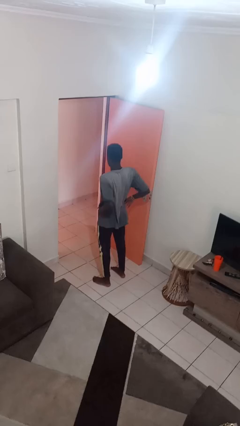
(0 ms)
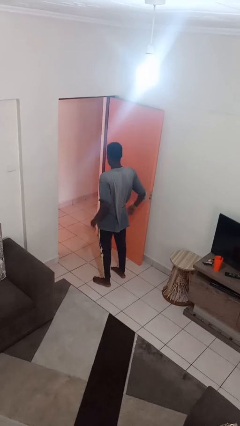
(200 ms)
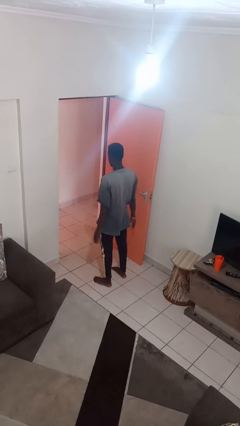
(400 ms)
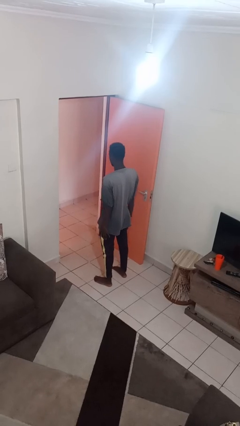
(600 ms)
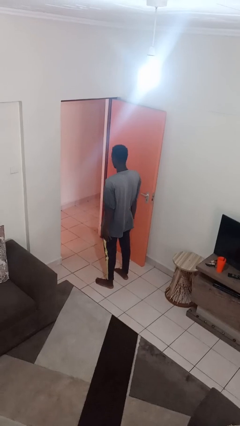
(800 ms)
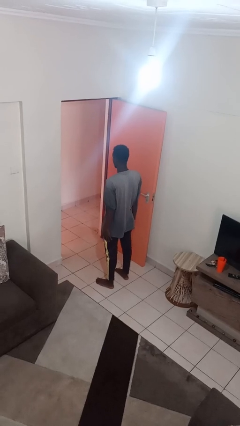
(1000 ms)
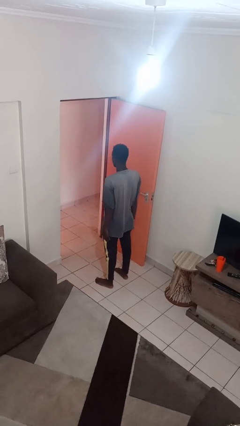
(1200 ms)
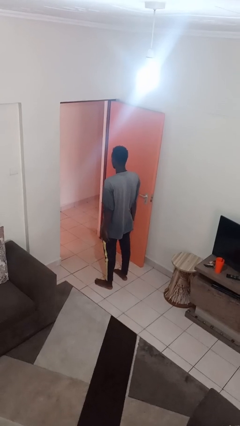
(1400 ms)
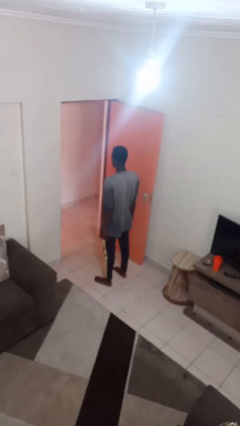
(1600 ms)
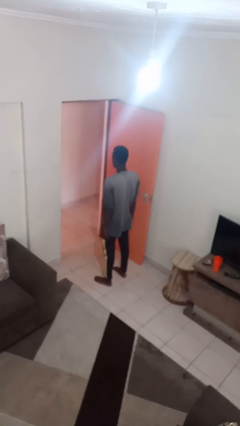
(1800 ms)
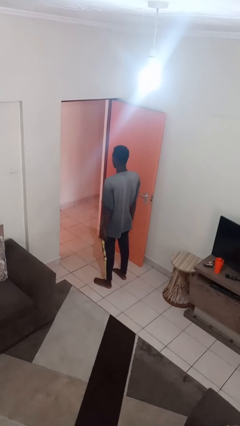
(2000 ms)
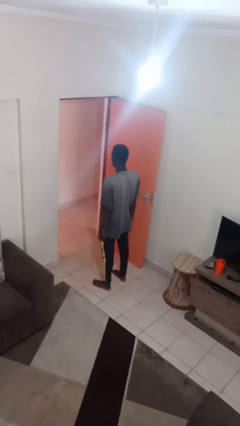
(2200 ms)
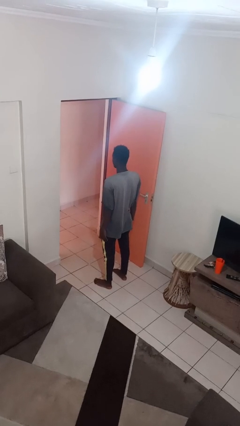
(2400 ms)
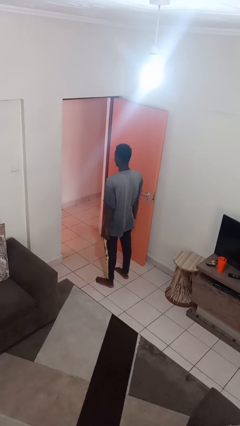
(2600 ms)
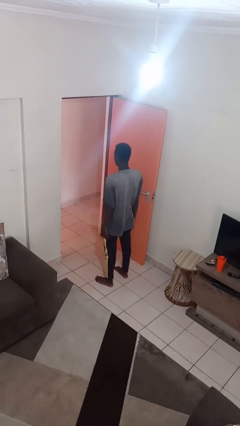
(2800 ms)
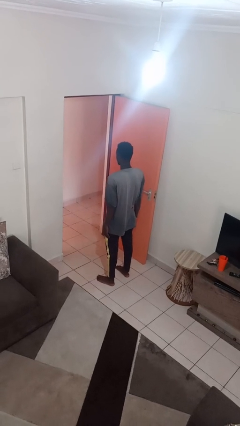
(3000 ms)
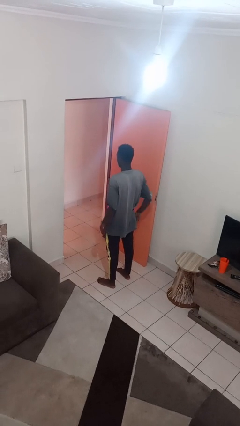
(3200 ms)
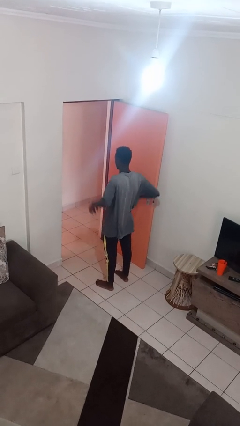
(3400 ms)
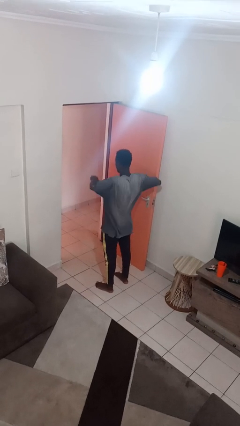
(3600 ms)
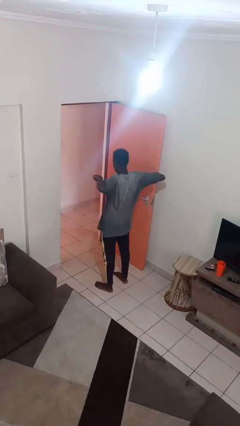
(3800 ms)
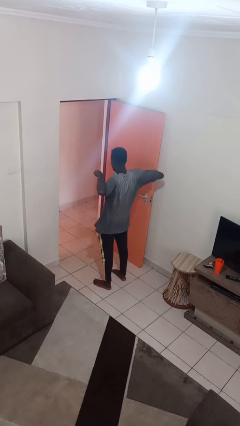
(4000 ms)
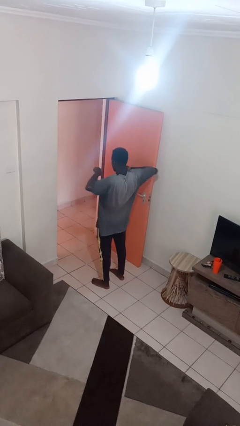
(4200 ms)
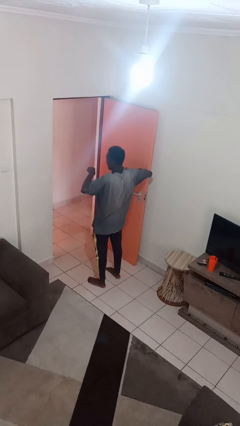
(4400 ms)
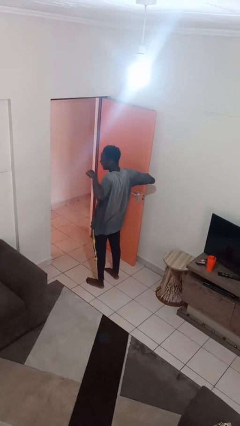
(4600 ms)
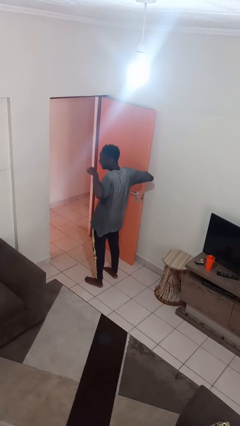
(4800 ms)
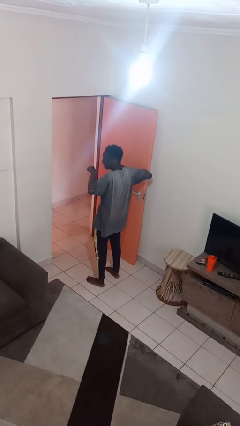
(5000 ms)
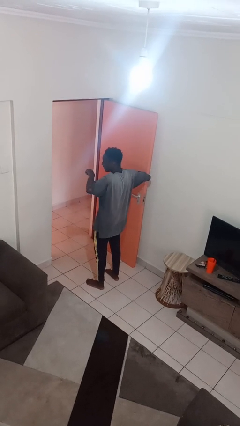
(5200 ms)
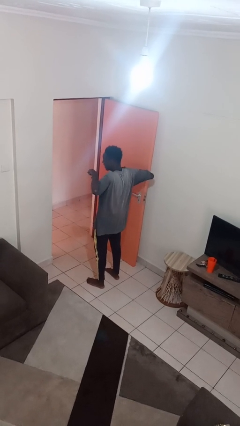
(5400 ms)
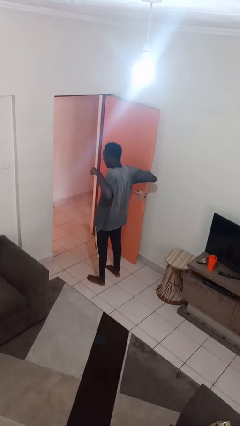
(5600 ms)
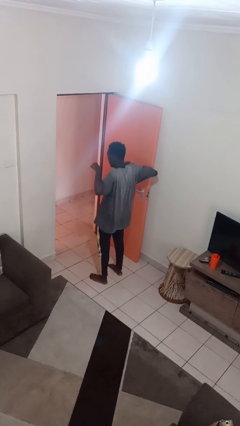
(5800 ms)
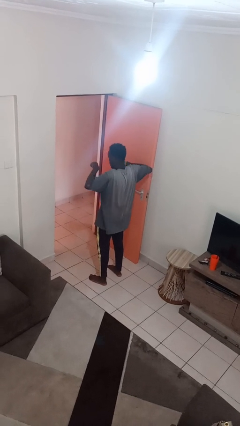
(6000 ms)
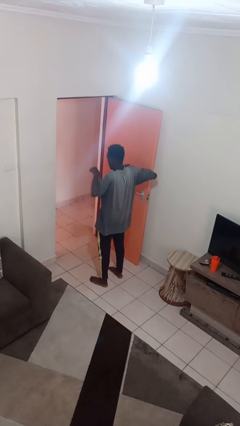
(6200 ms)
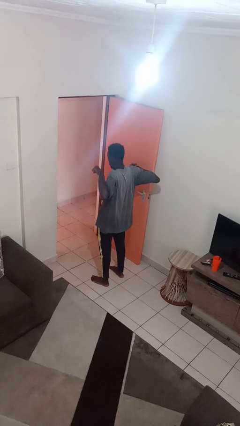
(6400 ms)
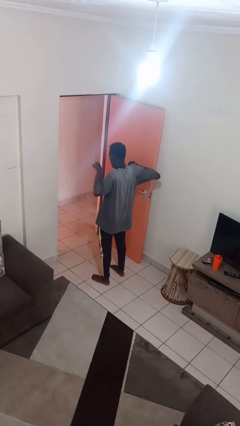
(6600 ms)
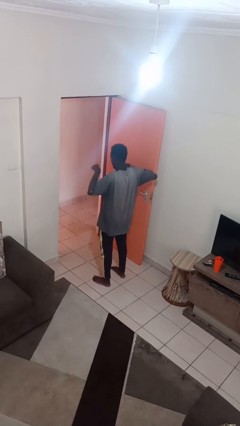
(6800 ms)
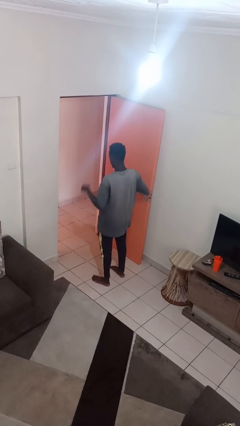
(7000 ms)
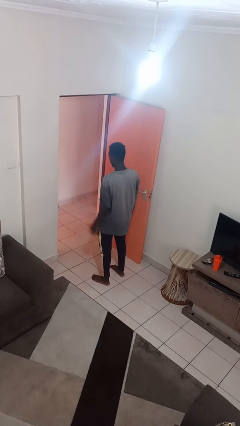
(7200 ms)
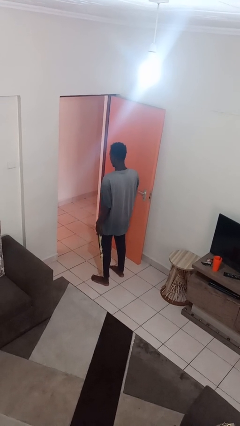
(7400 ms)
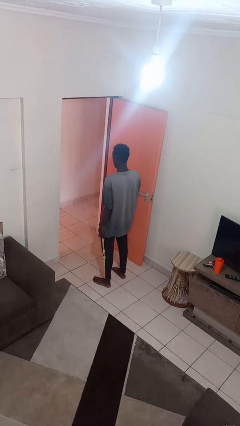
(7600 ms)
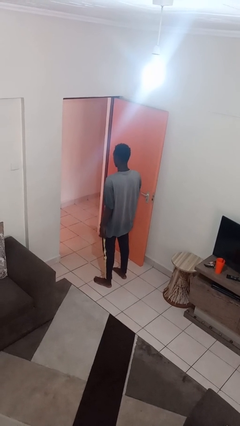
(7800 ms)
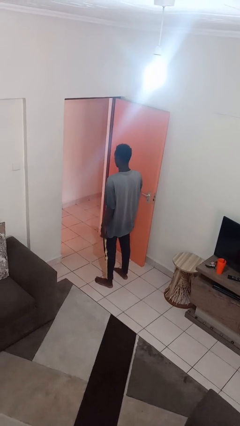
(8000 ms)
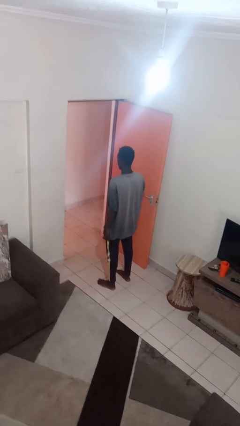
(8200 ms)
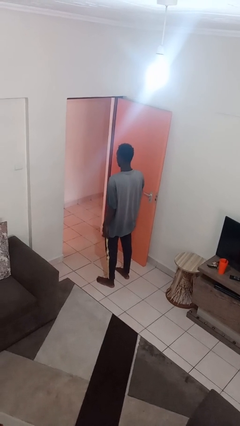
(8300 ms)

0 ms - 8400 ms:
person stretches arms to side

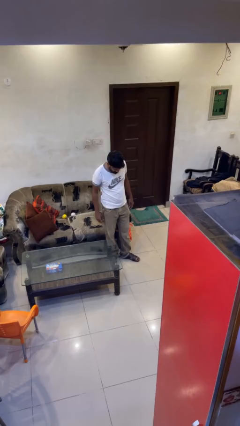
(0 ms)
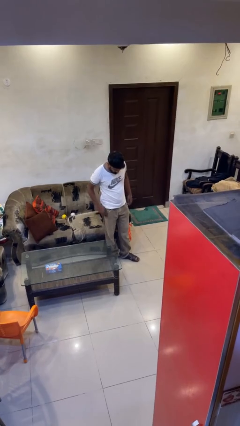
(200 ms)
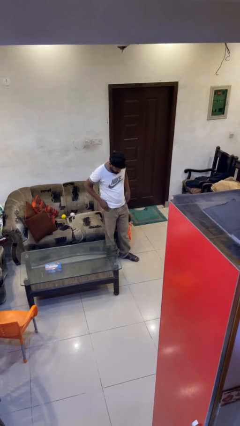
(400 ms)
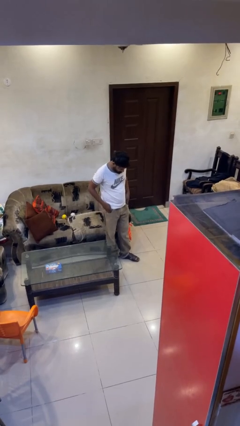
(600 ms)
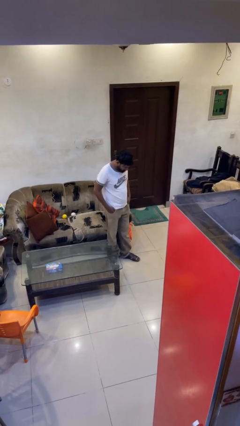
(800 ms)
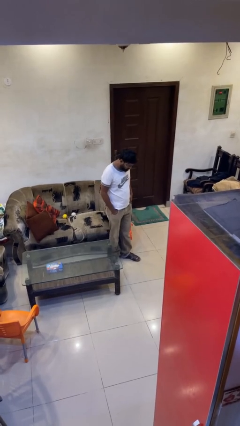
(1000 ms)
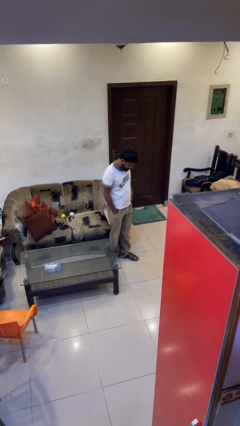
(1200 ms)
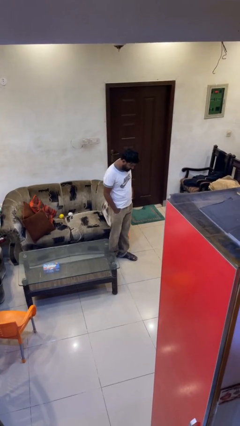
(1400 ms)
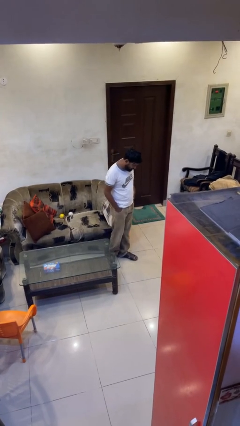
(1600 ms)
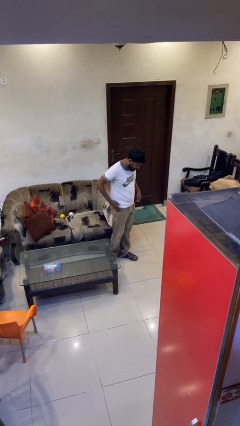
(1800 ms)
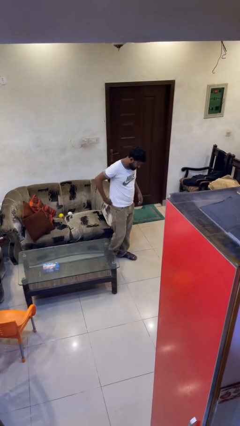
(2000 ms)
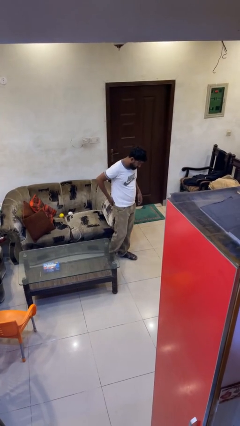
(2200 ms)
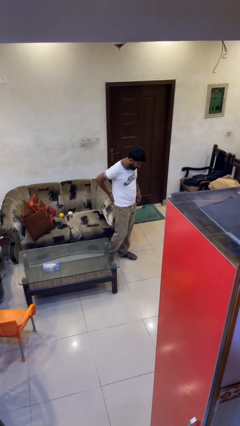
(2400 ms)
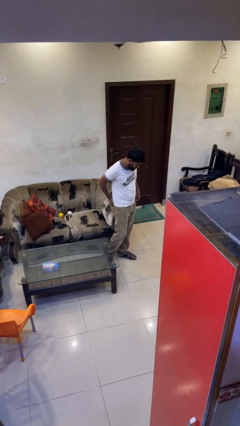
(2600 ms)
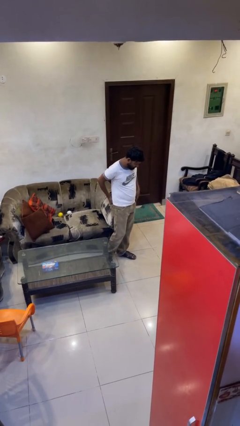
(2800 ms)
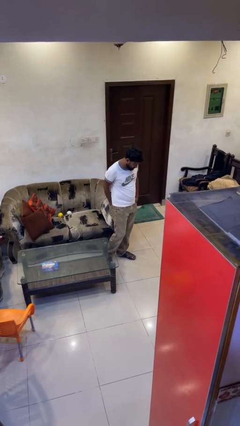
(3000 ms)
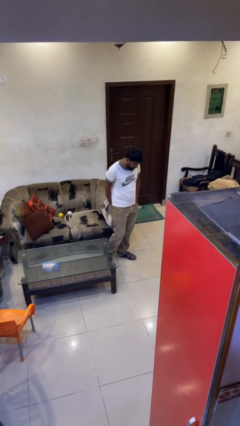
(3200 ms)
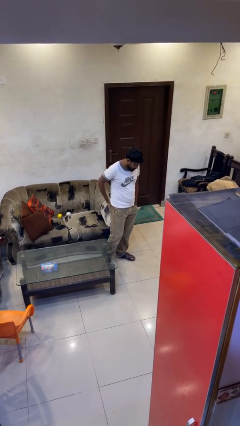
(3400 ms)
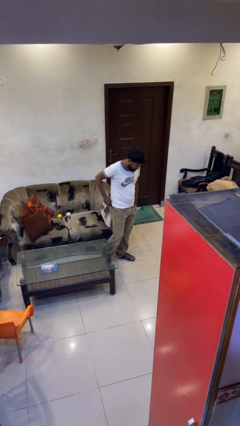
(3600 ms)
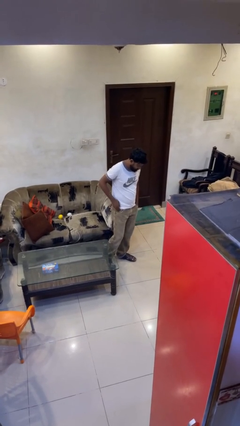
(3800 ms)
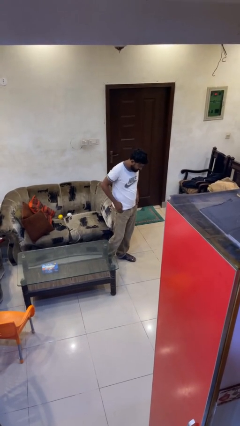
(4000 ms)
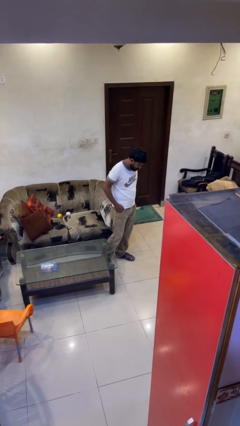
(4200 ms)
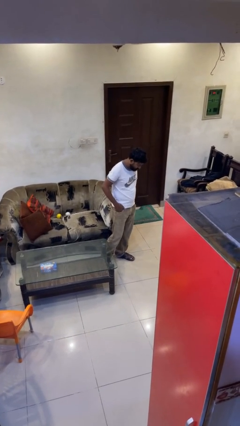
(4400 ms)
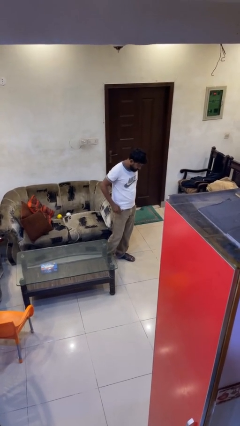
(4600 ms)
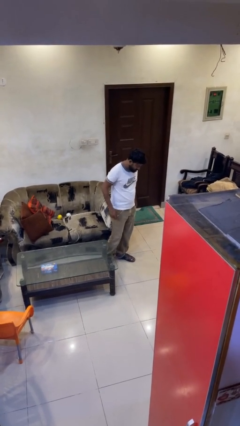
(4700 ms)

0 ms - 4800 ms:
person puts hands in back pockets

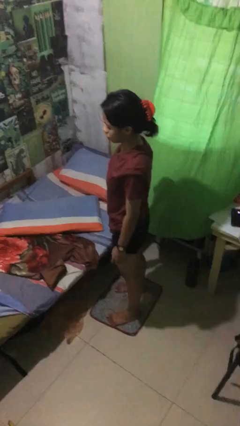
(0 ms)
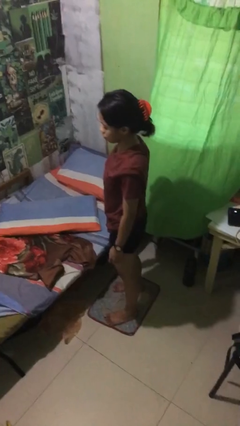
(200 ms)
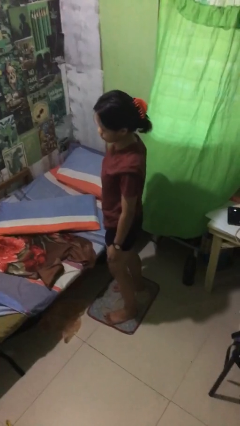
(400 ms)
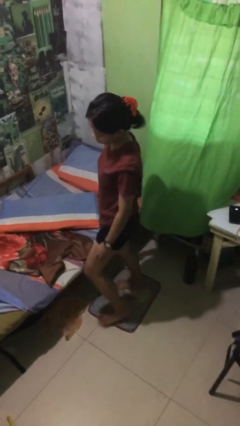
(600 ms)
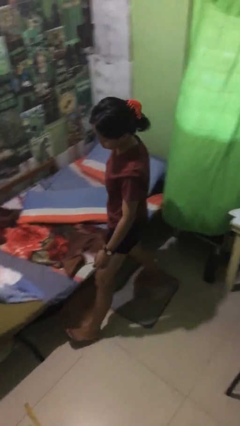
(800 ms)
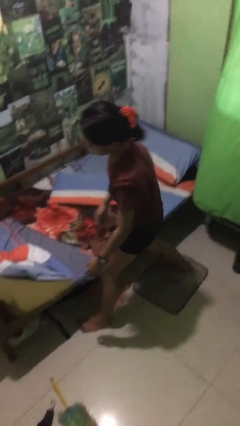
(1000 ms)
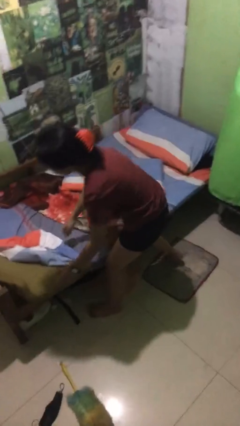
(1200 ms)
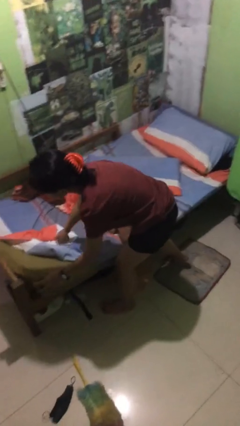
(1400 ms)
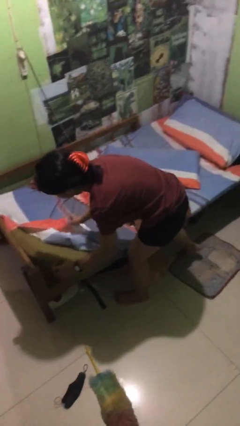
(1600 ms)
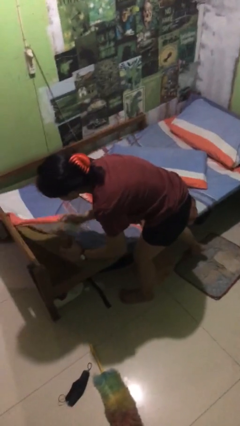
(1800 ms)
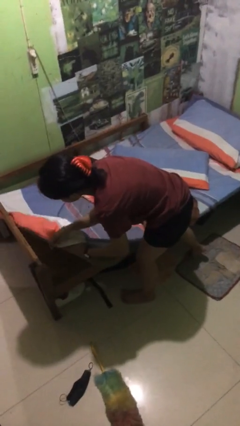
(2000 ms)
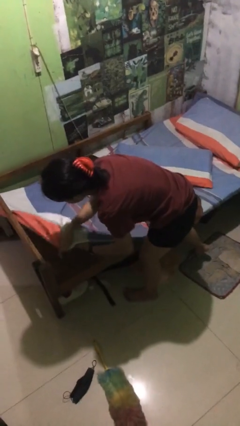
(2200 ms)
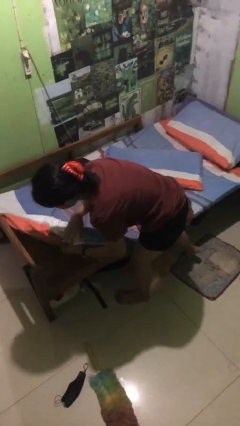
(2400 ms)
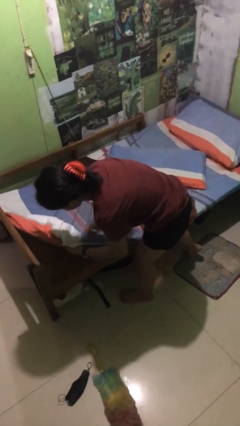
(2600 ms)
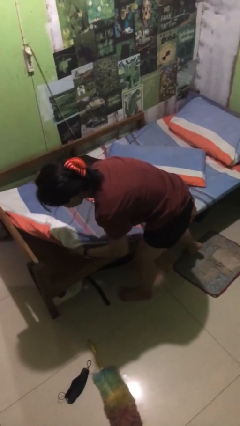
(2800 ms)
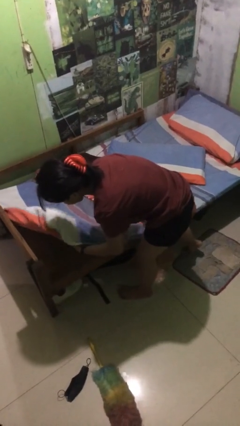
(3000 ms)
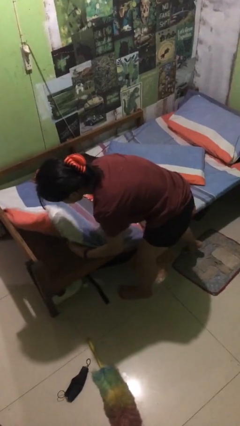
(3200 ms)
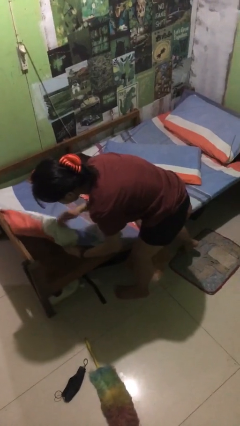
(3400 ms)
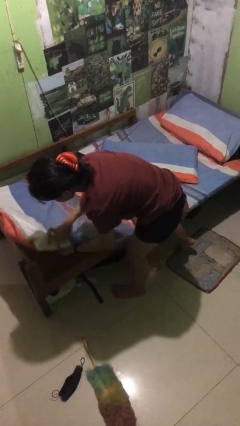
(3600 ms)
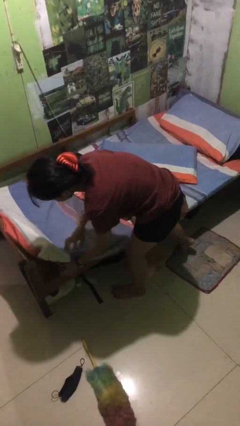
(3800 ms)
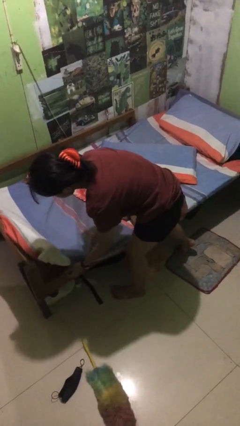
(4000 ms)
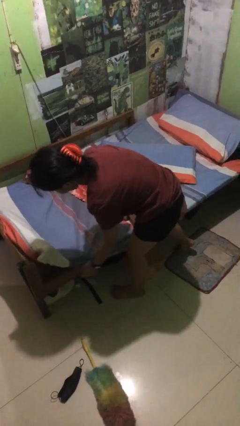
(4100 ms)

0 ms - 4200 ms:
person makes bed

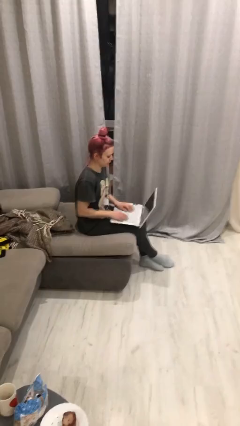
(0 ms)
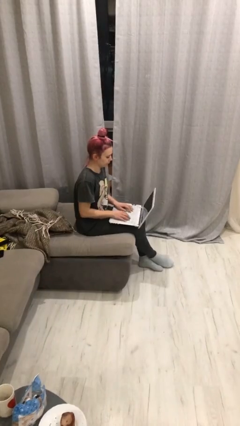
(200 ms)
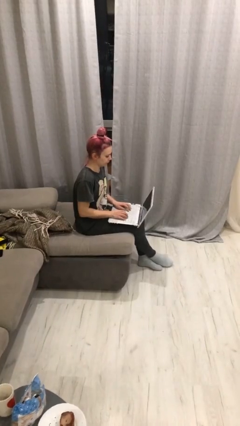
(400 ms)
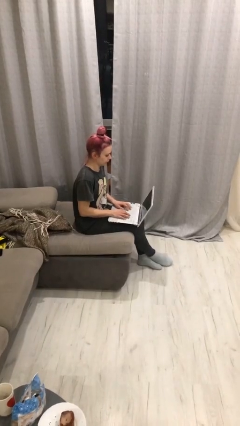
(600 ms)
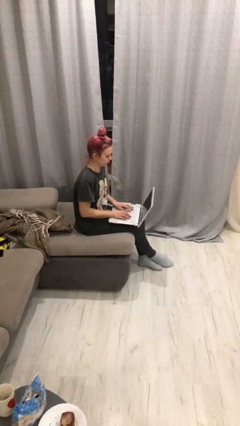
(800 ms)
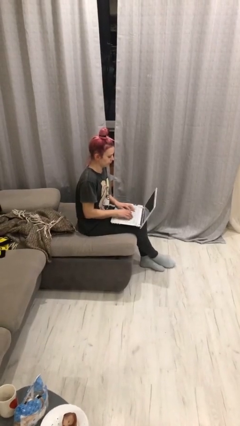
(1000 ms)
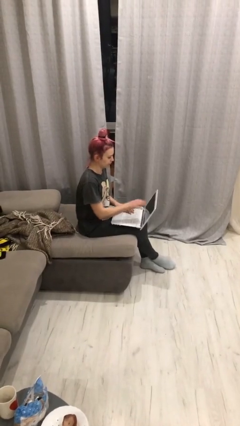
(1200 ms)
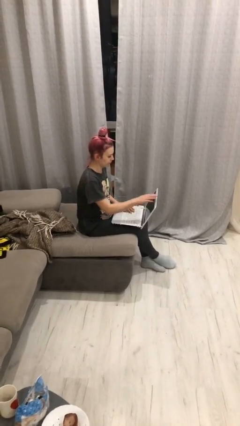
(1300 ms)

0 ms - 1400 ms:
person interacts with laptop
